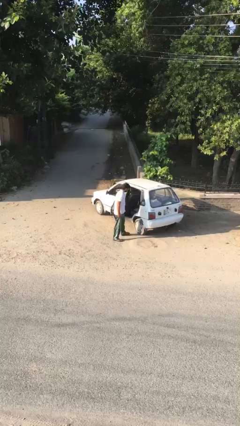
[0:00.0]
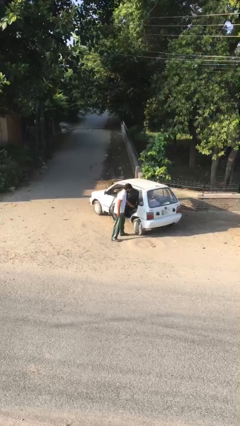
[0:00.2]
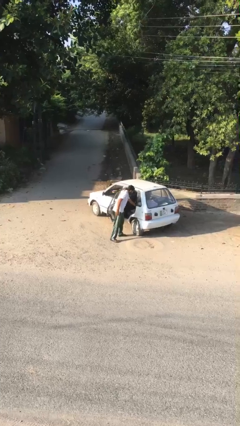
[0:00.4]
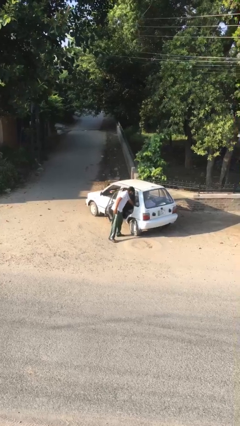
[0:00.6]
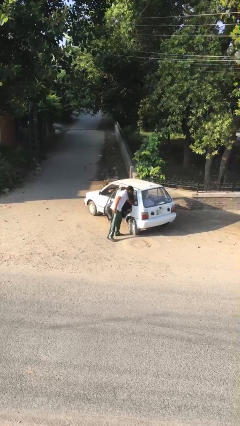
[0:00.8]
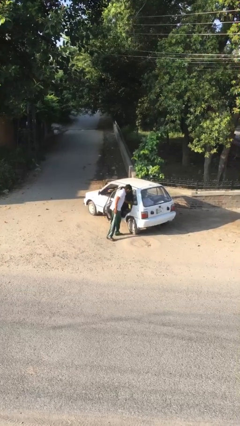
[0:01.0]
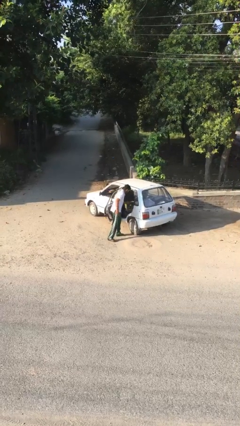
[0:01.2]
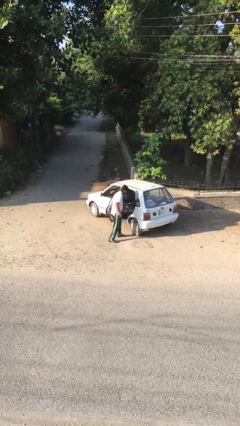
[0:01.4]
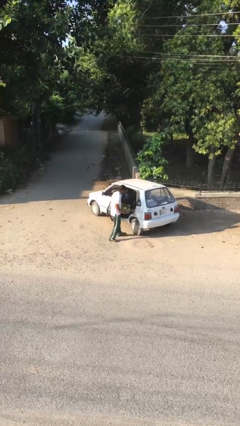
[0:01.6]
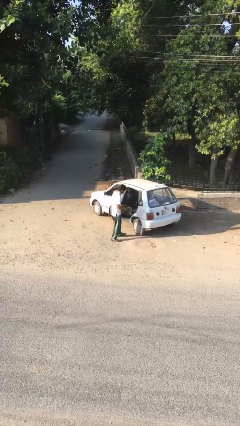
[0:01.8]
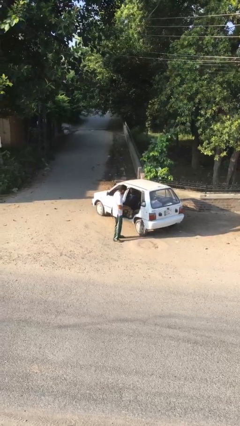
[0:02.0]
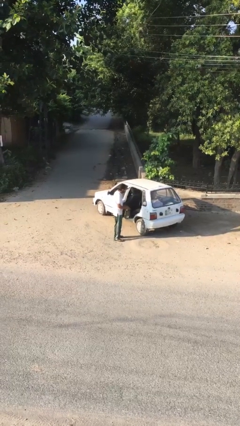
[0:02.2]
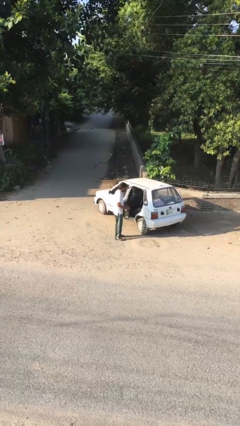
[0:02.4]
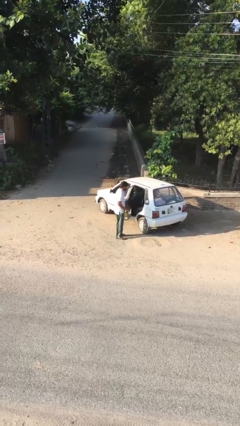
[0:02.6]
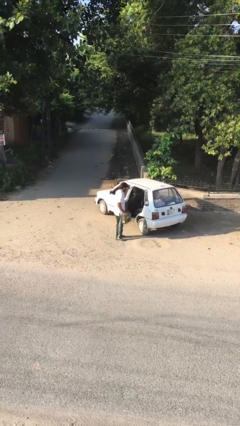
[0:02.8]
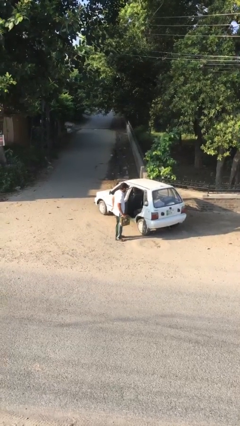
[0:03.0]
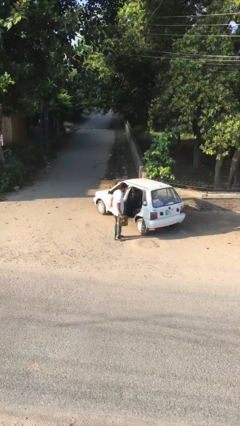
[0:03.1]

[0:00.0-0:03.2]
person unloads car

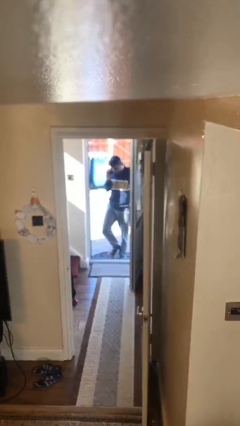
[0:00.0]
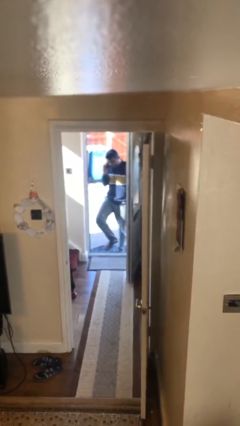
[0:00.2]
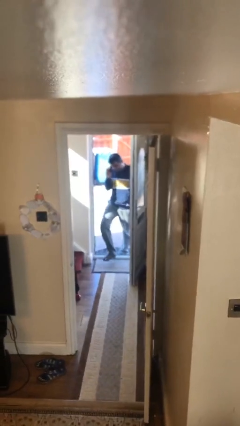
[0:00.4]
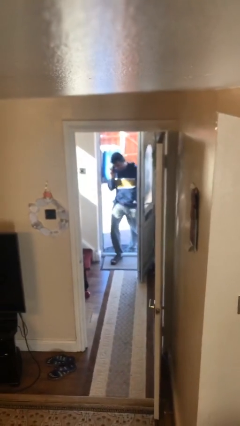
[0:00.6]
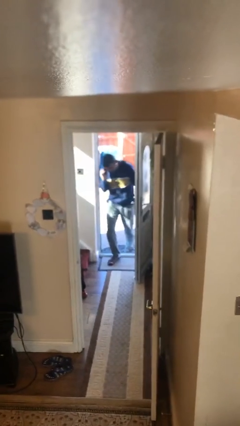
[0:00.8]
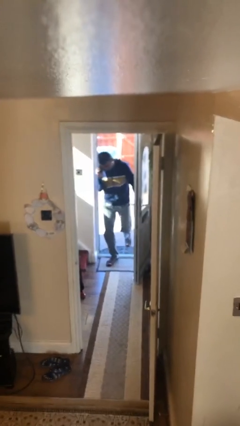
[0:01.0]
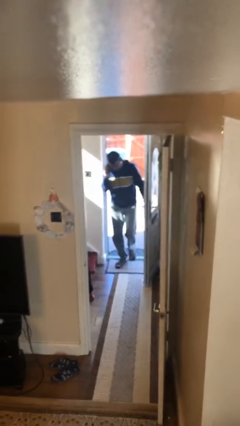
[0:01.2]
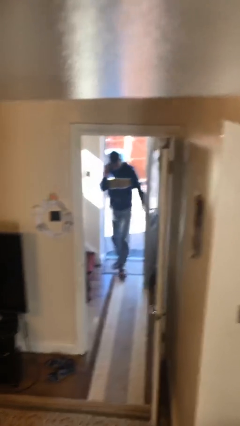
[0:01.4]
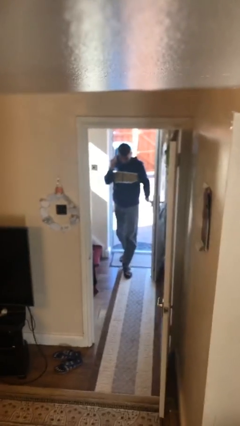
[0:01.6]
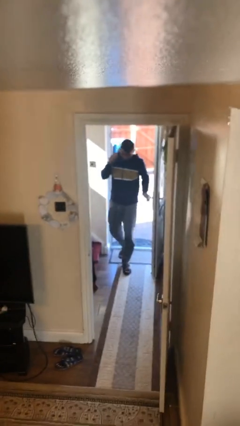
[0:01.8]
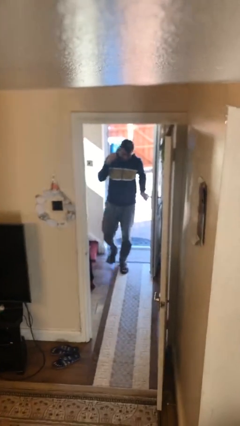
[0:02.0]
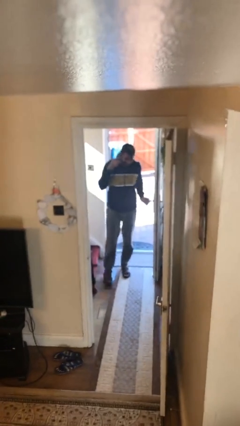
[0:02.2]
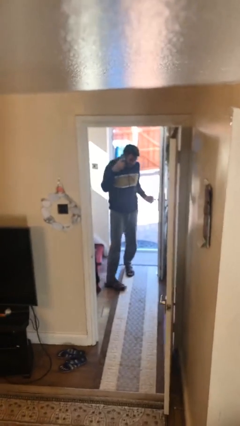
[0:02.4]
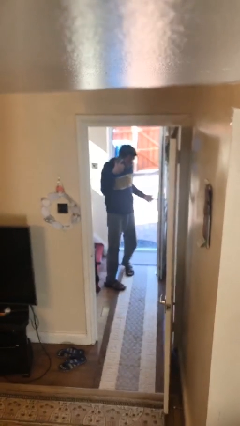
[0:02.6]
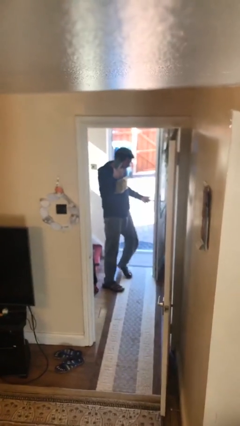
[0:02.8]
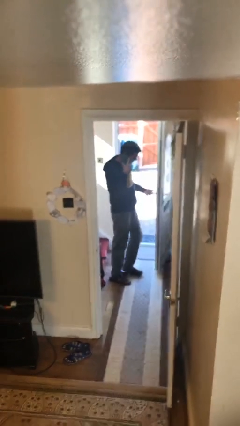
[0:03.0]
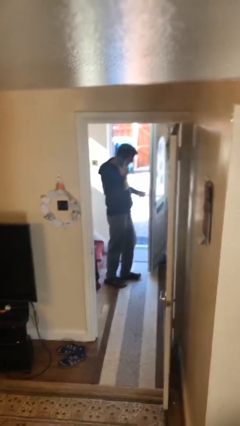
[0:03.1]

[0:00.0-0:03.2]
person enters scene through structure

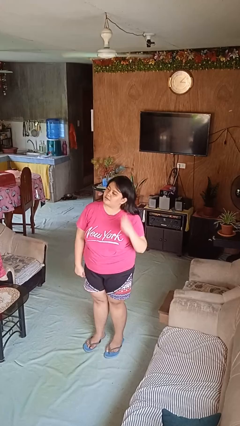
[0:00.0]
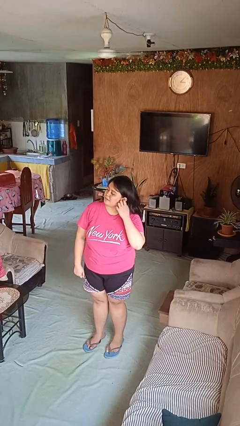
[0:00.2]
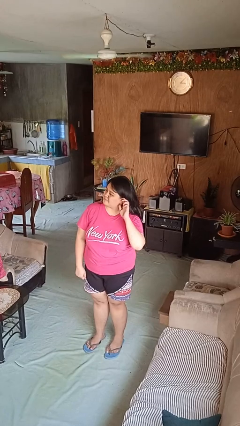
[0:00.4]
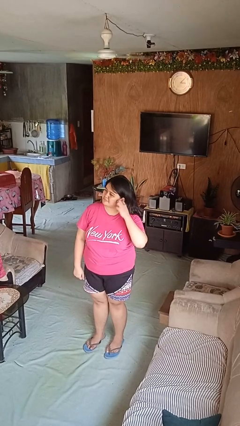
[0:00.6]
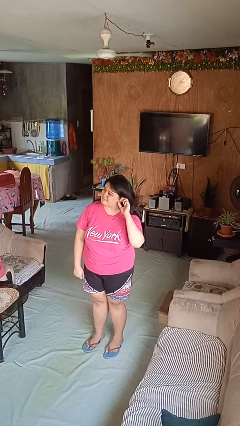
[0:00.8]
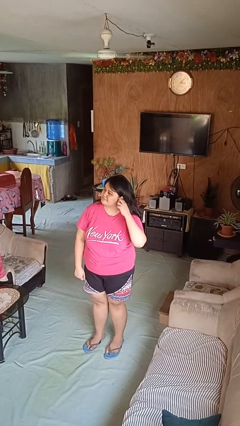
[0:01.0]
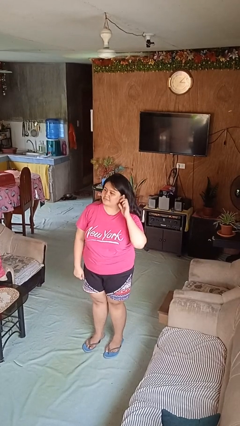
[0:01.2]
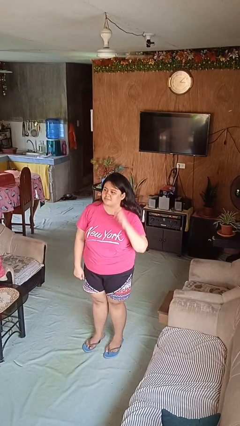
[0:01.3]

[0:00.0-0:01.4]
person touches earlobe

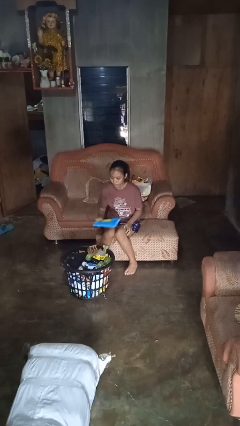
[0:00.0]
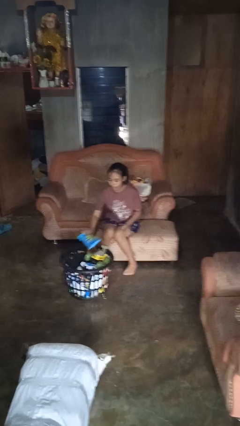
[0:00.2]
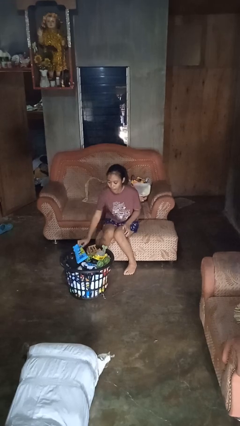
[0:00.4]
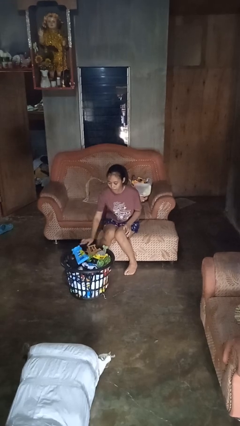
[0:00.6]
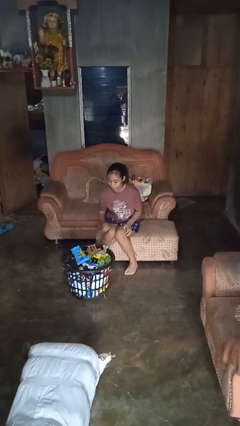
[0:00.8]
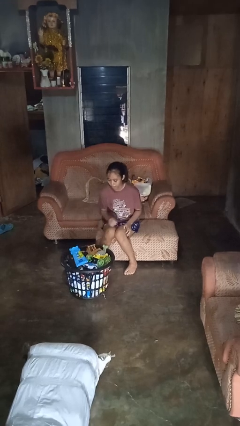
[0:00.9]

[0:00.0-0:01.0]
person puts object into basket

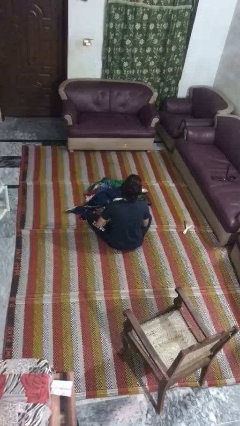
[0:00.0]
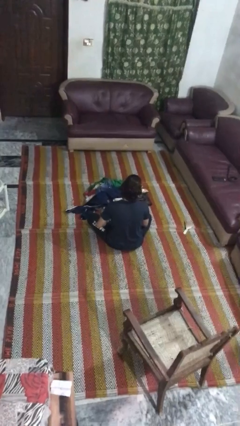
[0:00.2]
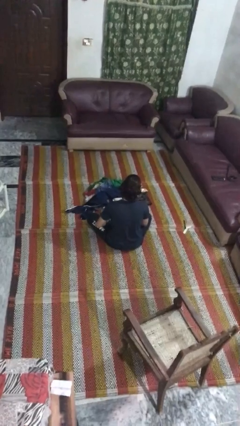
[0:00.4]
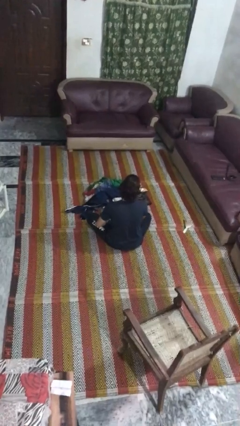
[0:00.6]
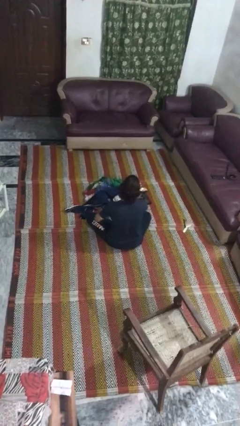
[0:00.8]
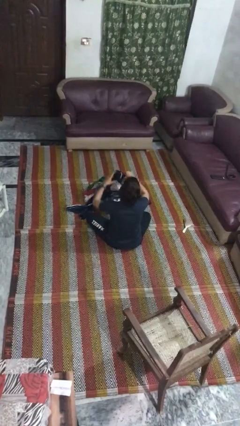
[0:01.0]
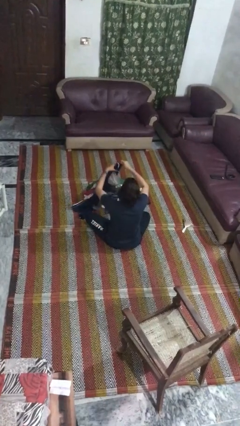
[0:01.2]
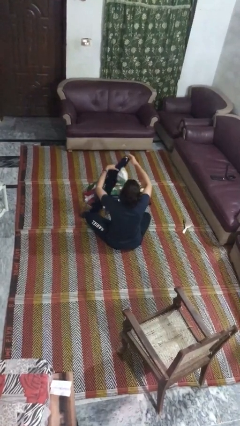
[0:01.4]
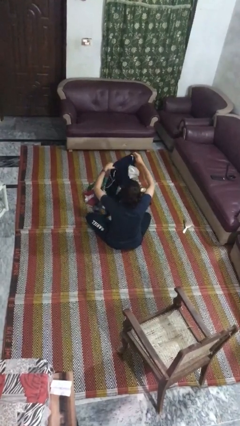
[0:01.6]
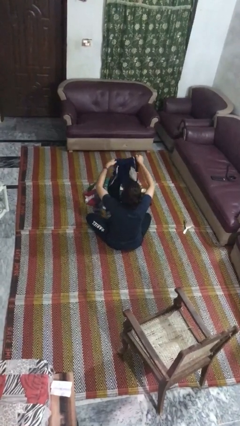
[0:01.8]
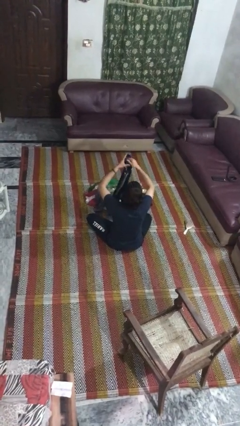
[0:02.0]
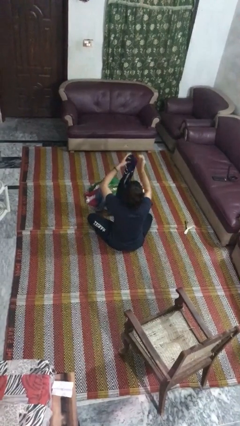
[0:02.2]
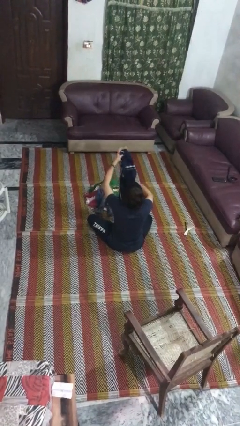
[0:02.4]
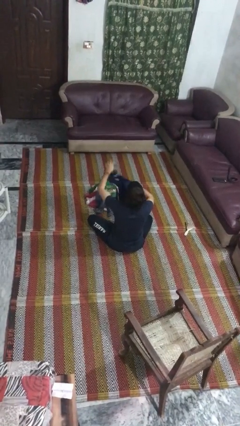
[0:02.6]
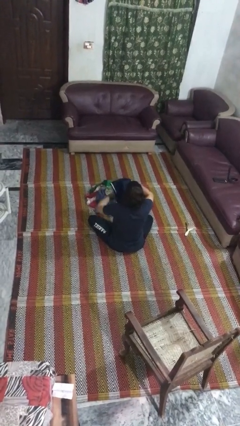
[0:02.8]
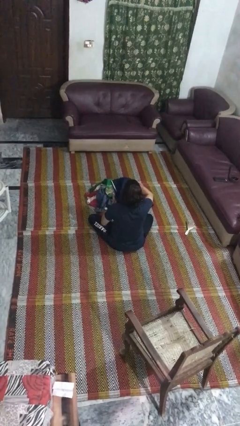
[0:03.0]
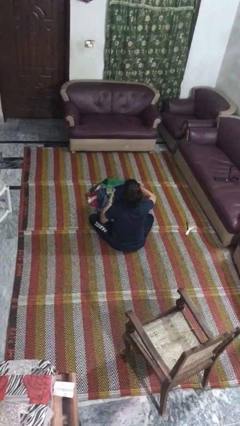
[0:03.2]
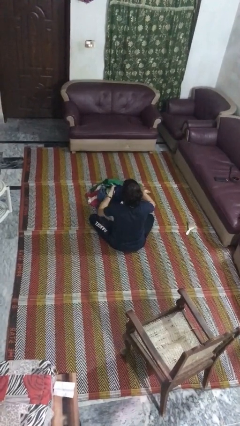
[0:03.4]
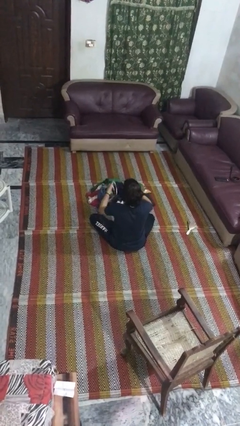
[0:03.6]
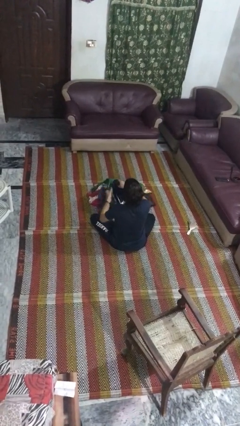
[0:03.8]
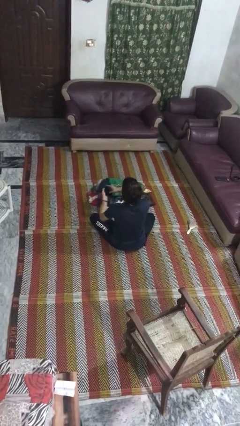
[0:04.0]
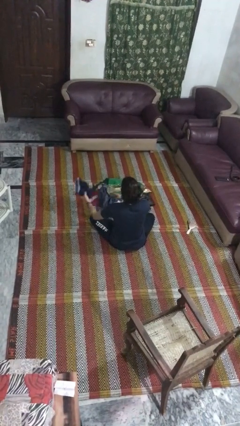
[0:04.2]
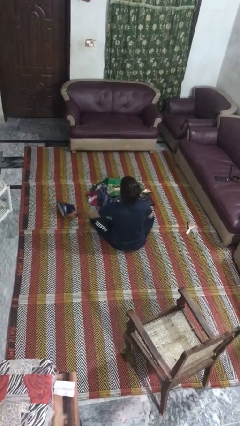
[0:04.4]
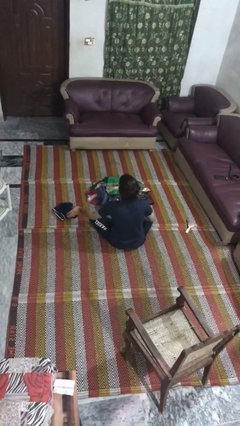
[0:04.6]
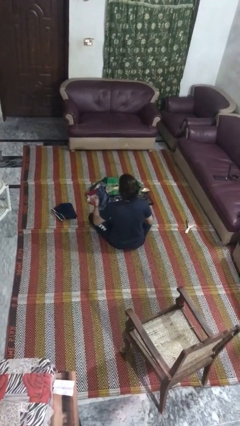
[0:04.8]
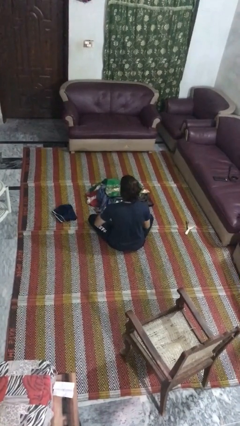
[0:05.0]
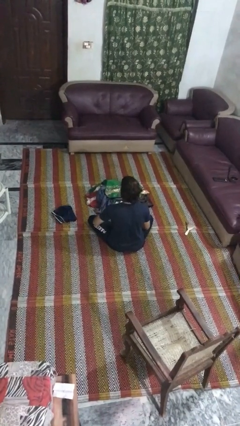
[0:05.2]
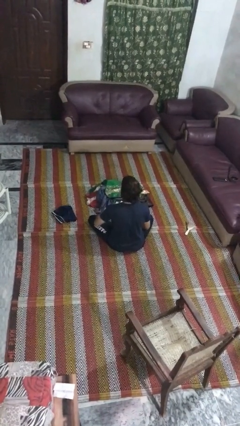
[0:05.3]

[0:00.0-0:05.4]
person folds pants

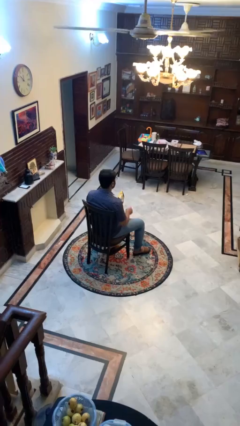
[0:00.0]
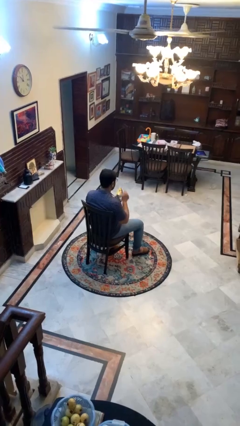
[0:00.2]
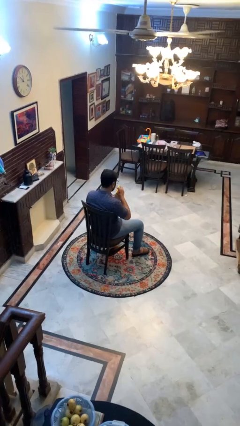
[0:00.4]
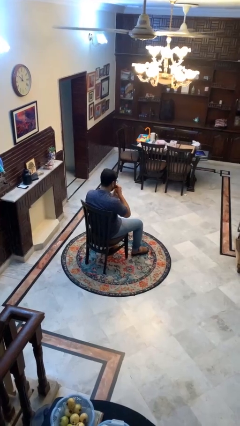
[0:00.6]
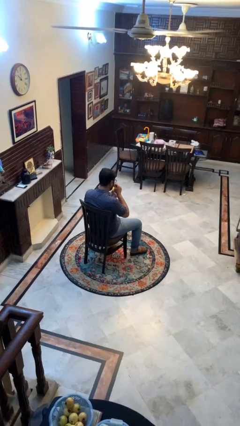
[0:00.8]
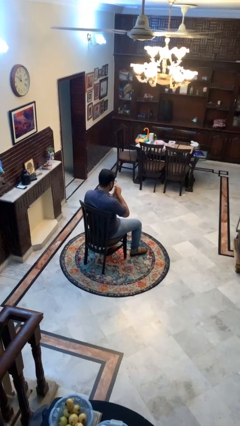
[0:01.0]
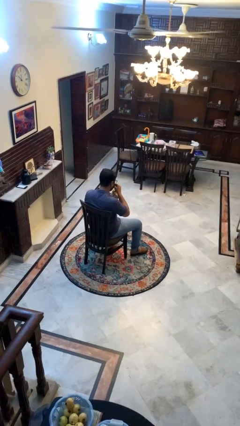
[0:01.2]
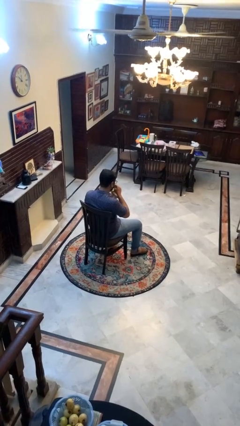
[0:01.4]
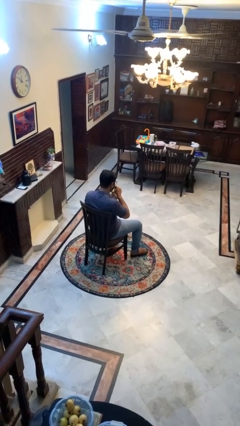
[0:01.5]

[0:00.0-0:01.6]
person eats snack from bag

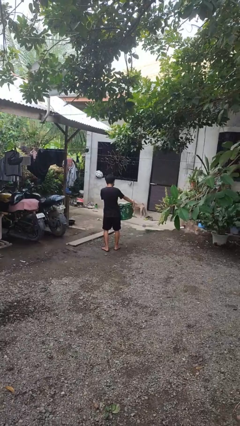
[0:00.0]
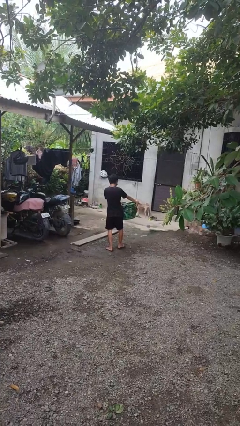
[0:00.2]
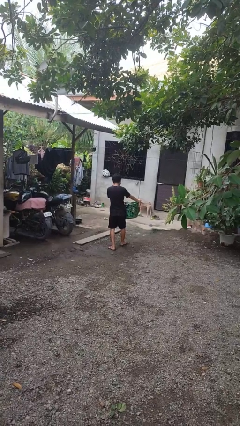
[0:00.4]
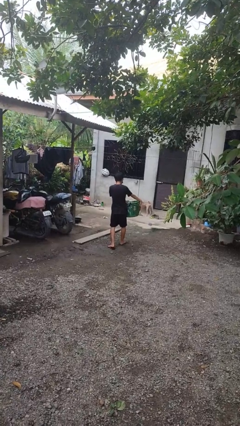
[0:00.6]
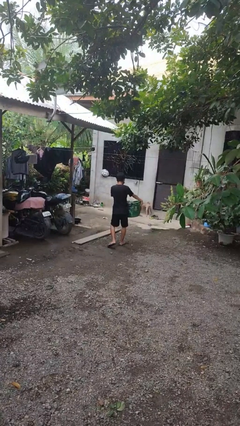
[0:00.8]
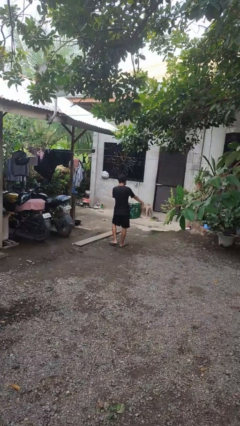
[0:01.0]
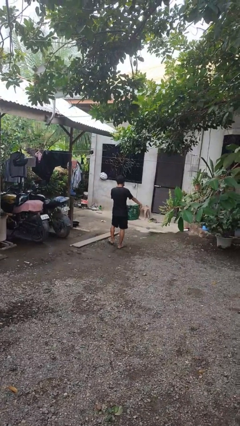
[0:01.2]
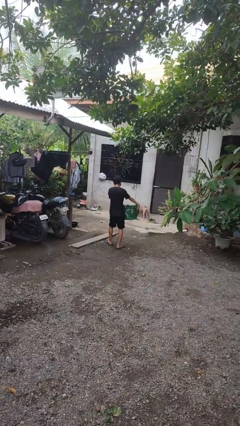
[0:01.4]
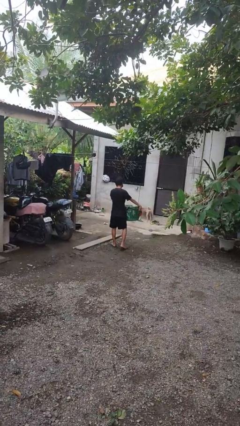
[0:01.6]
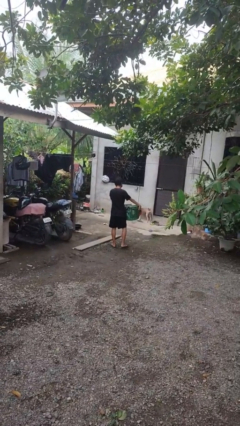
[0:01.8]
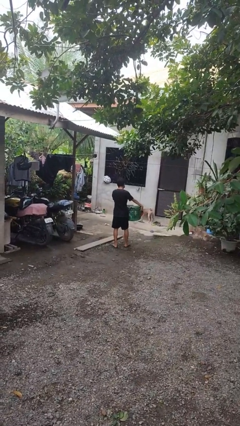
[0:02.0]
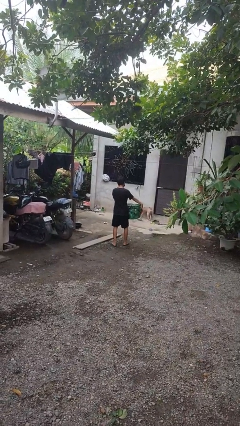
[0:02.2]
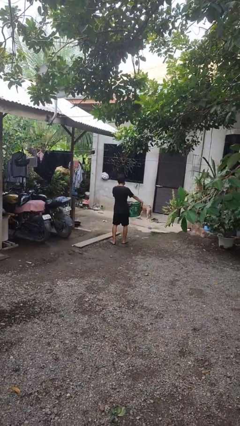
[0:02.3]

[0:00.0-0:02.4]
person carries laundry basket
